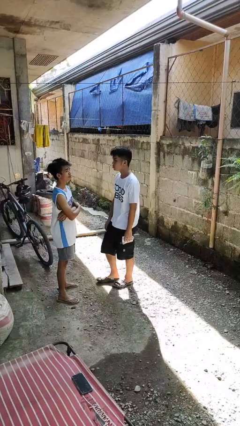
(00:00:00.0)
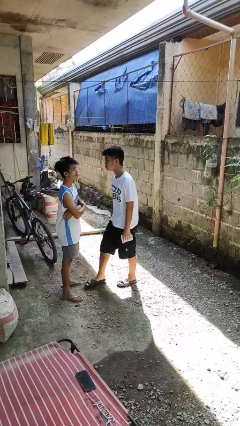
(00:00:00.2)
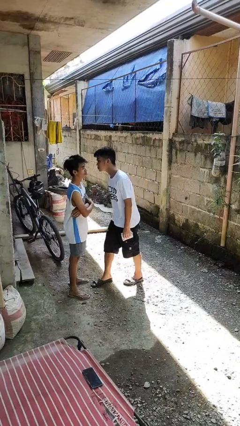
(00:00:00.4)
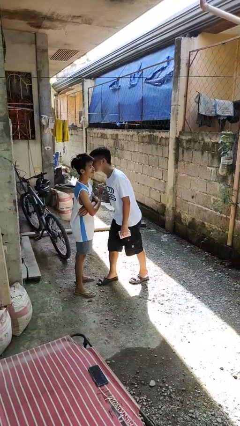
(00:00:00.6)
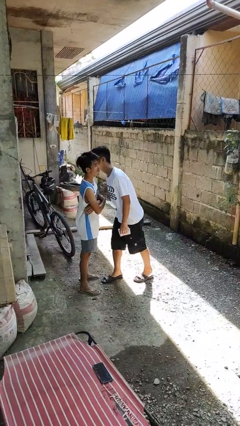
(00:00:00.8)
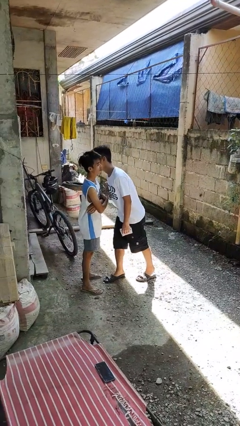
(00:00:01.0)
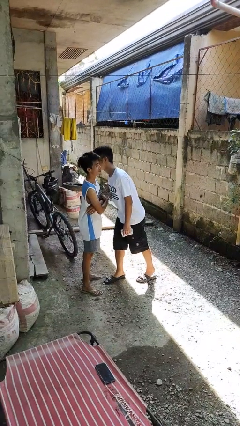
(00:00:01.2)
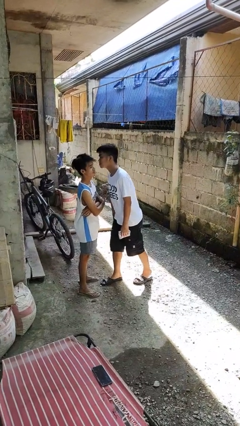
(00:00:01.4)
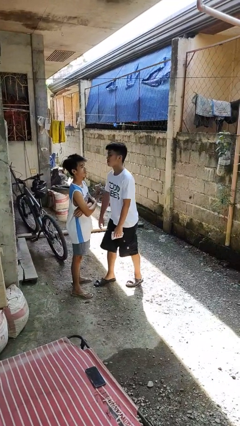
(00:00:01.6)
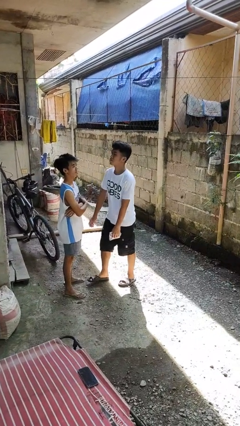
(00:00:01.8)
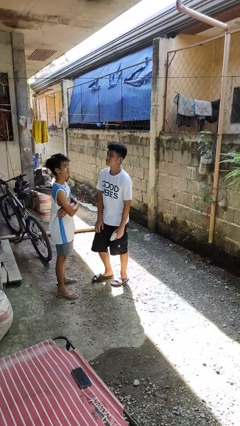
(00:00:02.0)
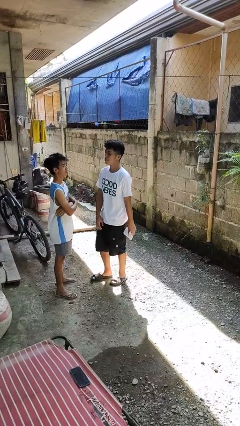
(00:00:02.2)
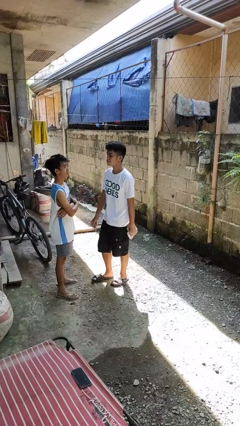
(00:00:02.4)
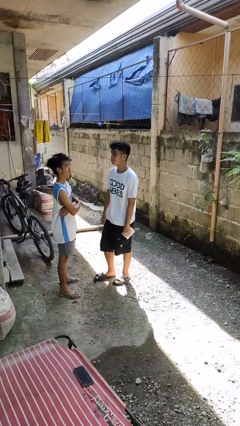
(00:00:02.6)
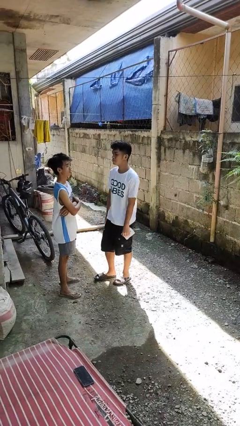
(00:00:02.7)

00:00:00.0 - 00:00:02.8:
person kisses cheek of person

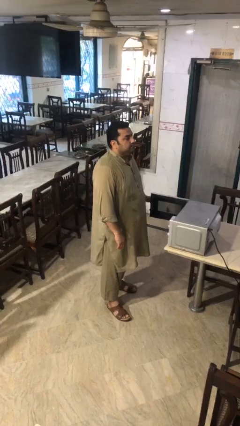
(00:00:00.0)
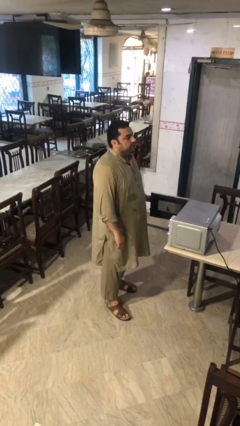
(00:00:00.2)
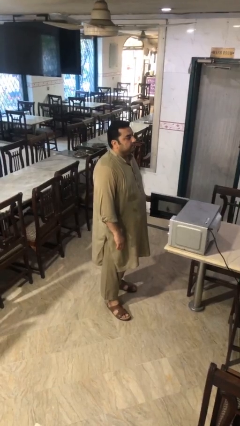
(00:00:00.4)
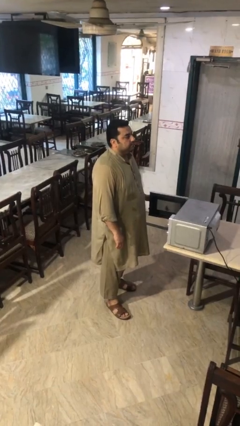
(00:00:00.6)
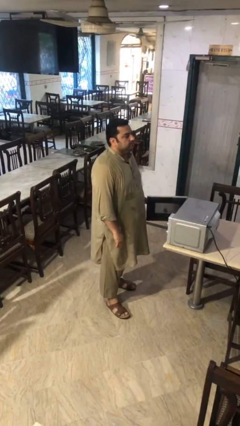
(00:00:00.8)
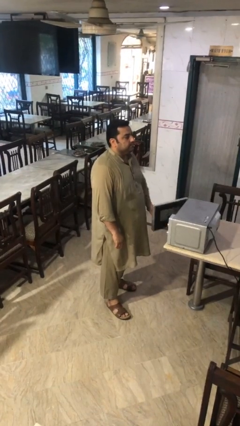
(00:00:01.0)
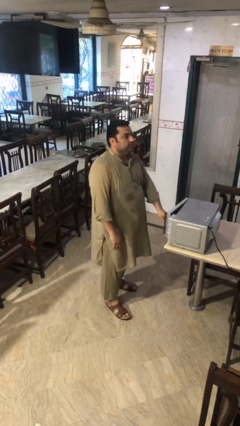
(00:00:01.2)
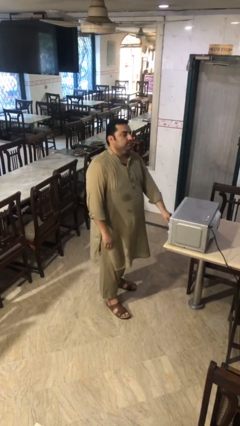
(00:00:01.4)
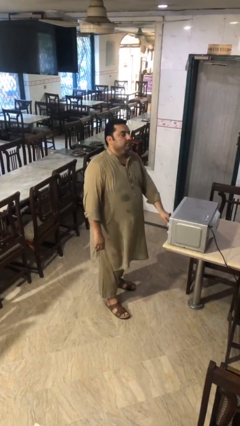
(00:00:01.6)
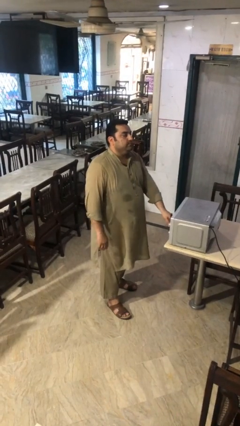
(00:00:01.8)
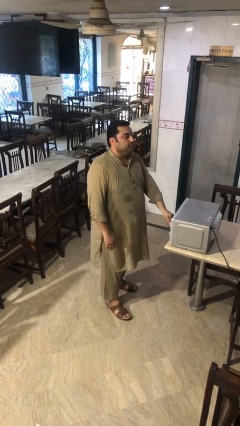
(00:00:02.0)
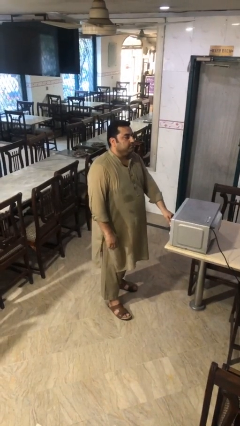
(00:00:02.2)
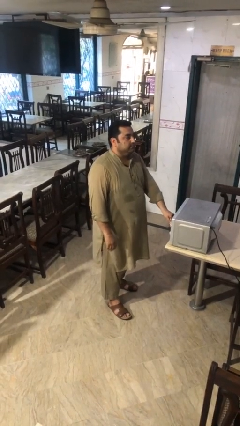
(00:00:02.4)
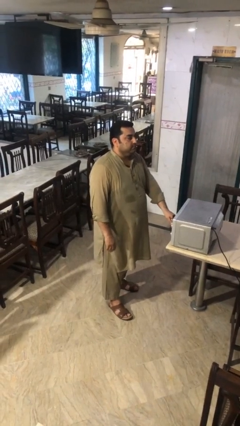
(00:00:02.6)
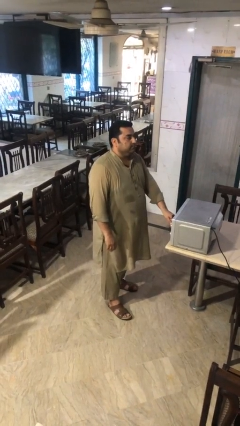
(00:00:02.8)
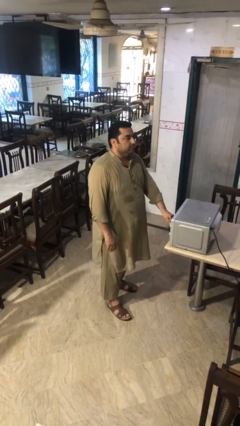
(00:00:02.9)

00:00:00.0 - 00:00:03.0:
person closes microwave

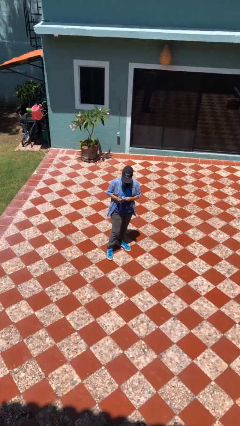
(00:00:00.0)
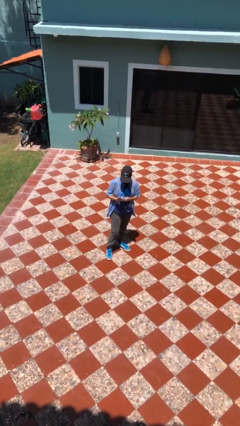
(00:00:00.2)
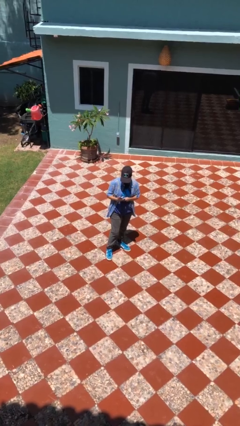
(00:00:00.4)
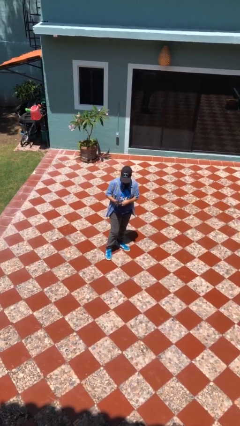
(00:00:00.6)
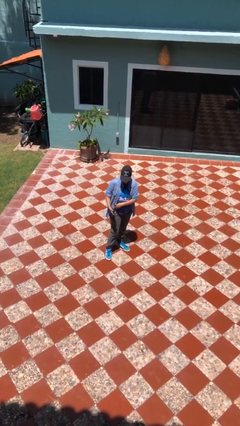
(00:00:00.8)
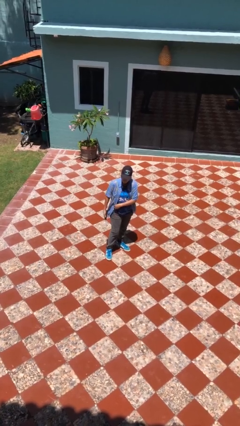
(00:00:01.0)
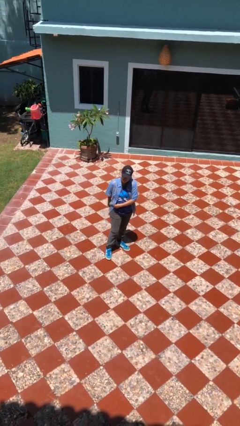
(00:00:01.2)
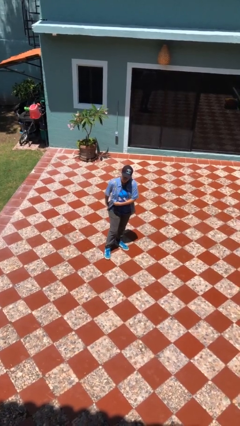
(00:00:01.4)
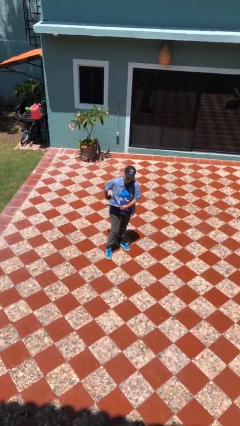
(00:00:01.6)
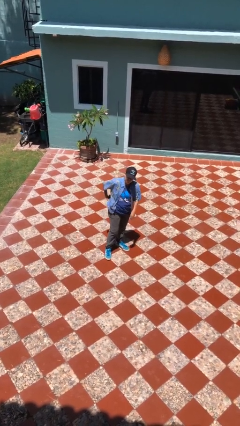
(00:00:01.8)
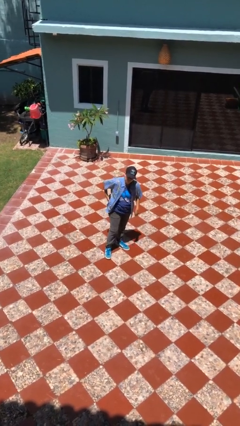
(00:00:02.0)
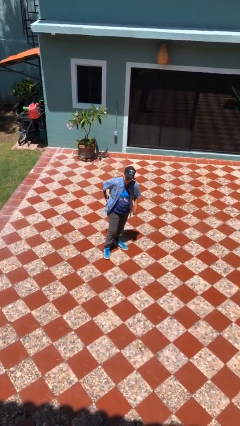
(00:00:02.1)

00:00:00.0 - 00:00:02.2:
person puts phone into pocket

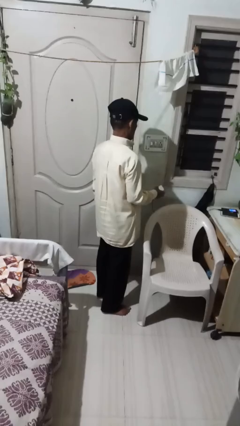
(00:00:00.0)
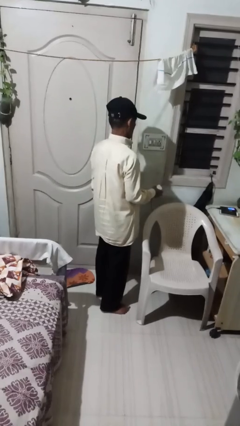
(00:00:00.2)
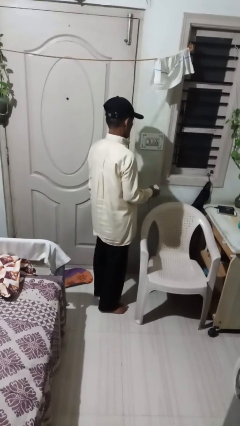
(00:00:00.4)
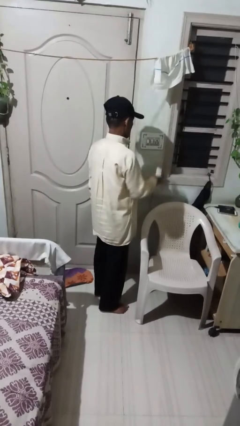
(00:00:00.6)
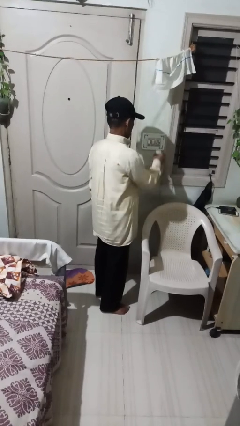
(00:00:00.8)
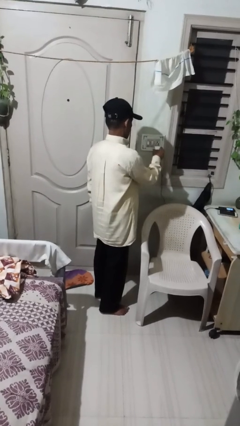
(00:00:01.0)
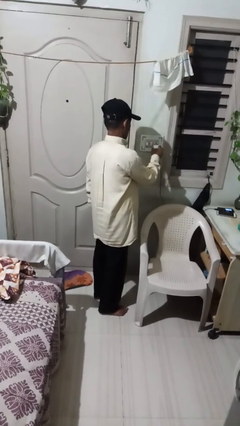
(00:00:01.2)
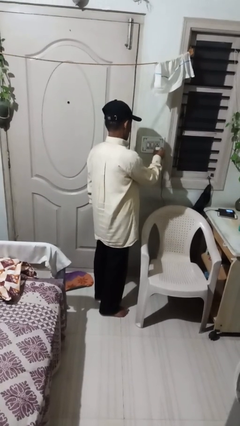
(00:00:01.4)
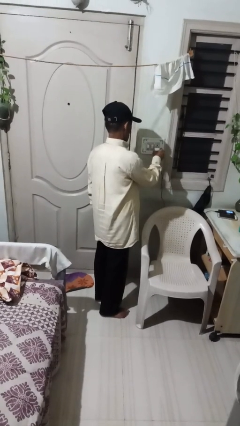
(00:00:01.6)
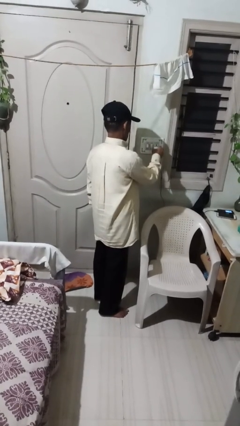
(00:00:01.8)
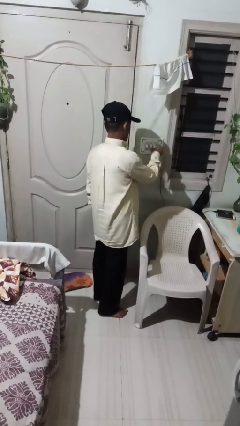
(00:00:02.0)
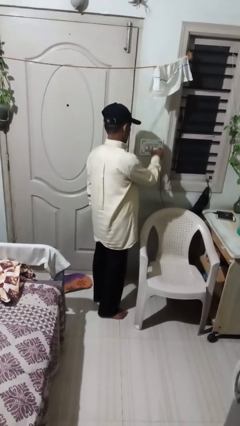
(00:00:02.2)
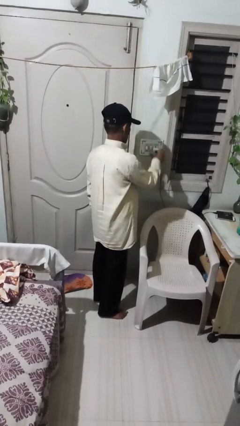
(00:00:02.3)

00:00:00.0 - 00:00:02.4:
person plugs into electrical socket

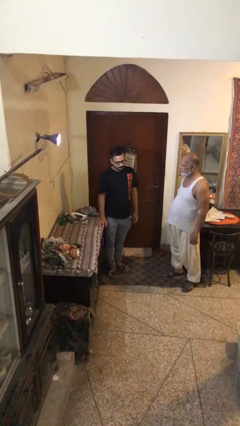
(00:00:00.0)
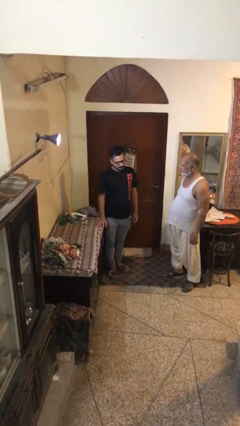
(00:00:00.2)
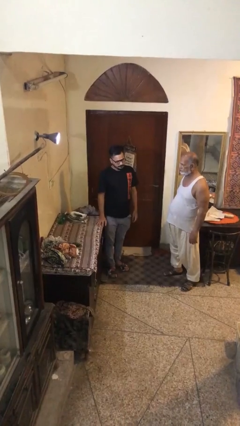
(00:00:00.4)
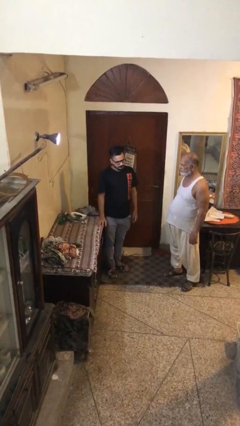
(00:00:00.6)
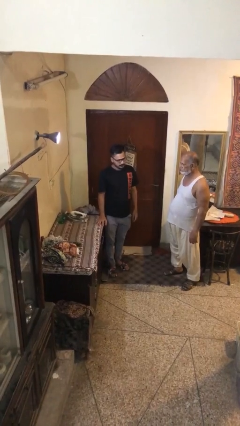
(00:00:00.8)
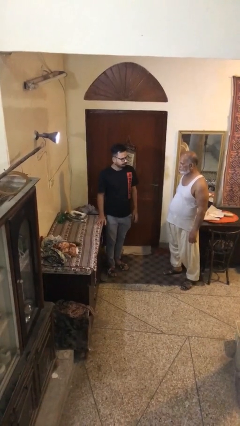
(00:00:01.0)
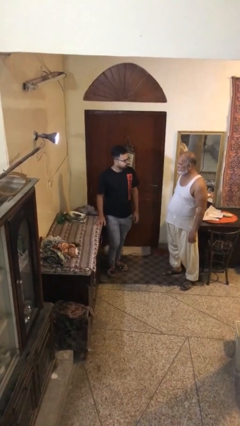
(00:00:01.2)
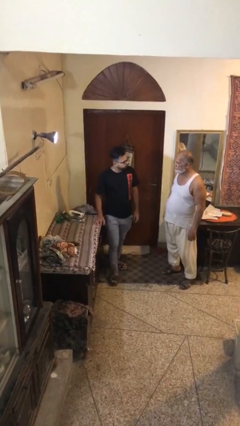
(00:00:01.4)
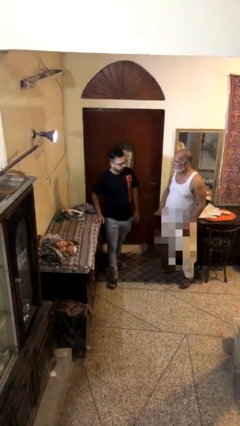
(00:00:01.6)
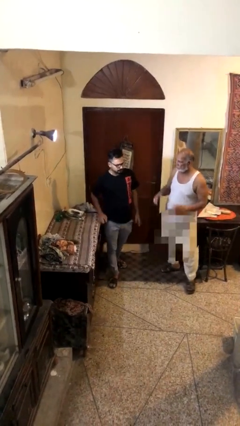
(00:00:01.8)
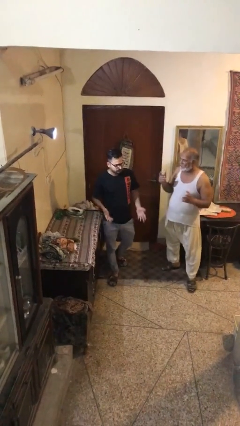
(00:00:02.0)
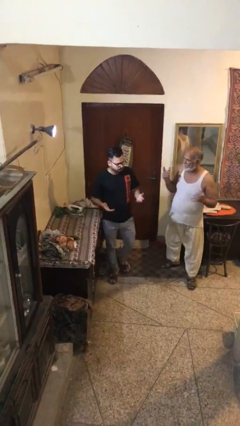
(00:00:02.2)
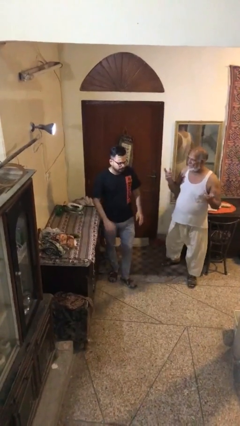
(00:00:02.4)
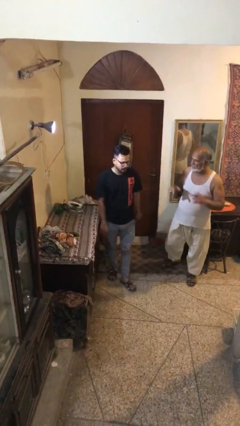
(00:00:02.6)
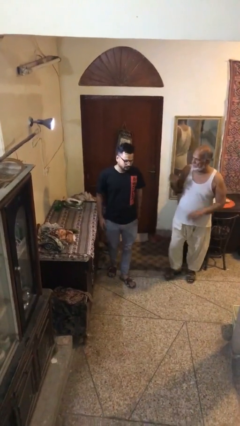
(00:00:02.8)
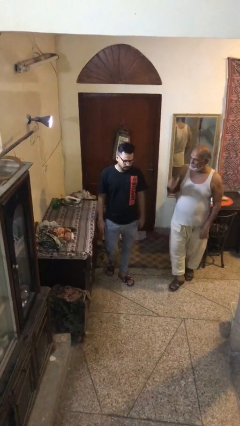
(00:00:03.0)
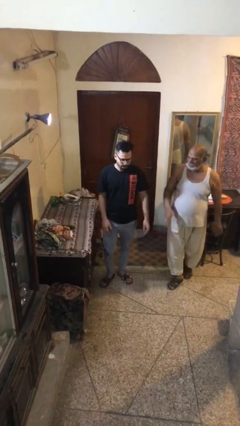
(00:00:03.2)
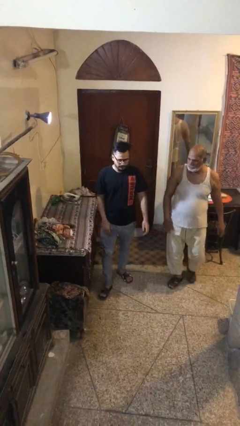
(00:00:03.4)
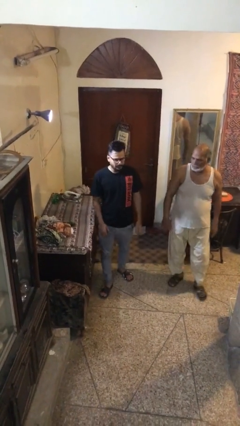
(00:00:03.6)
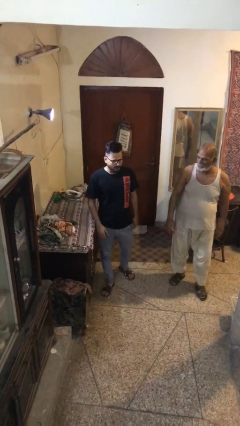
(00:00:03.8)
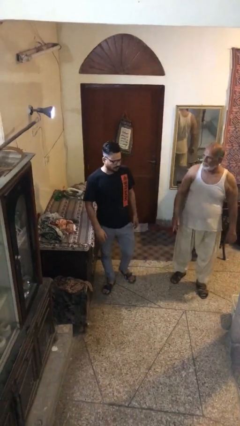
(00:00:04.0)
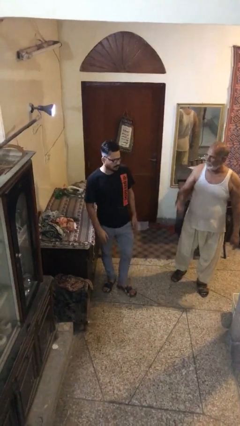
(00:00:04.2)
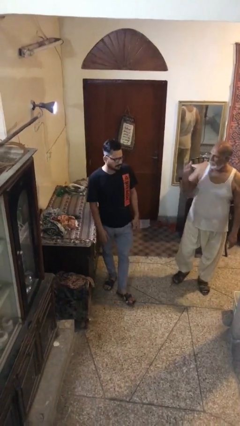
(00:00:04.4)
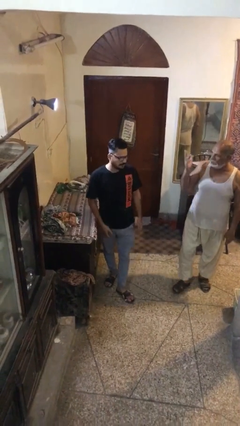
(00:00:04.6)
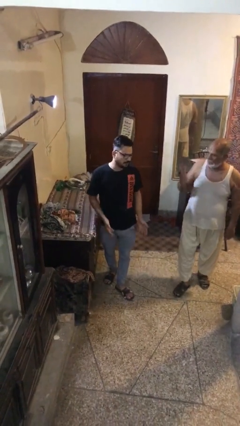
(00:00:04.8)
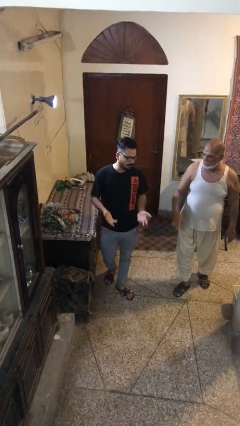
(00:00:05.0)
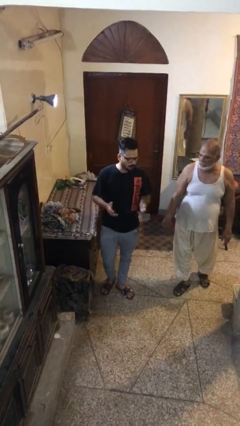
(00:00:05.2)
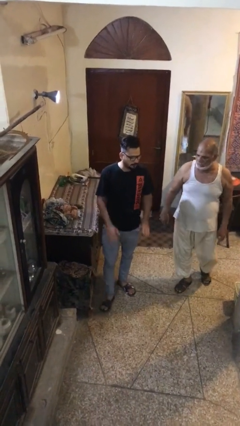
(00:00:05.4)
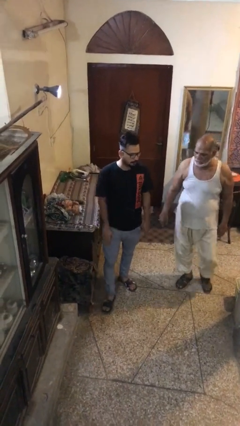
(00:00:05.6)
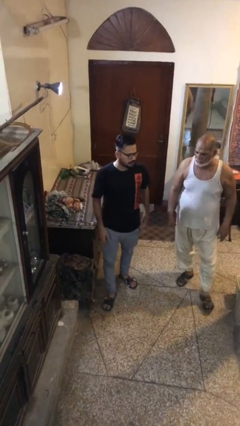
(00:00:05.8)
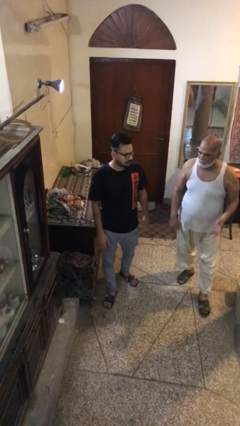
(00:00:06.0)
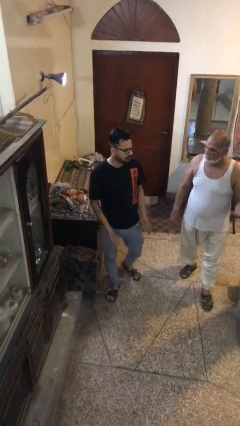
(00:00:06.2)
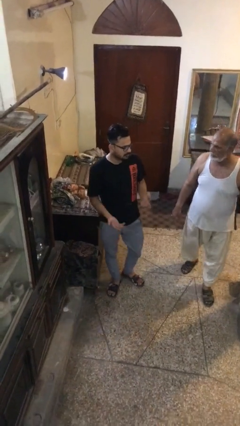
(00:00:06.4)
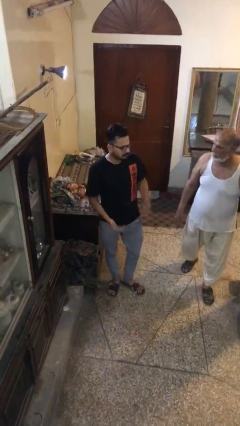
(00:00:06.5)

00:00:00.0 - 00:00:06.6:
person talks to person
